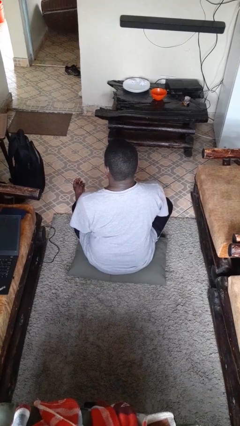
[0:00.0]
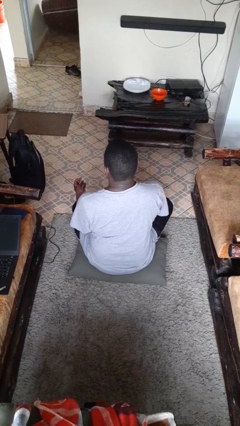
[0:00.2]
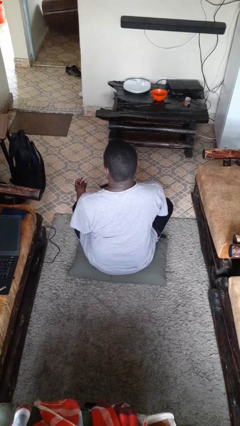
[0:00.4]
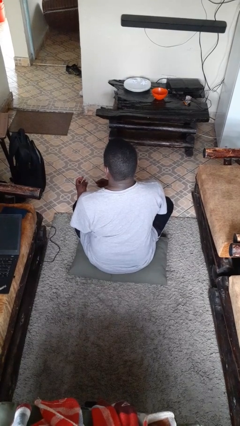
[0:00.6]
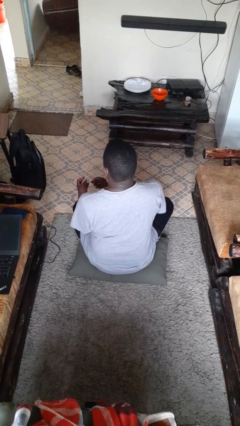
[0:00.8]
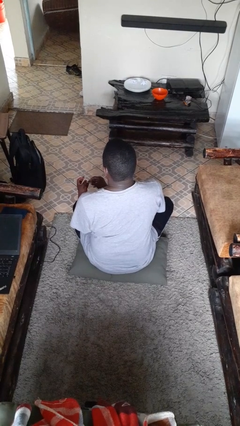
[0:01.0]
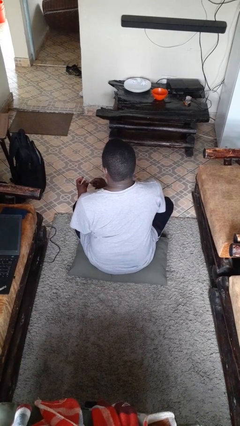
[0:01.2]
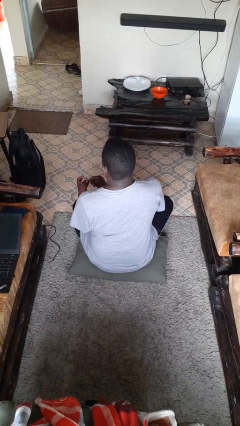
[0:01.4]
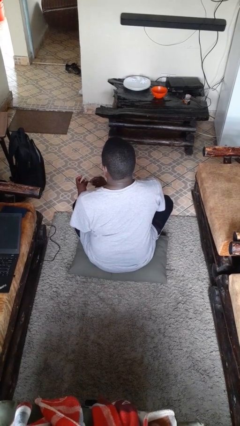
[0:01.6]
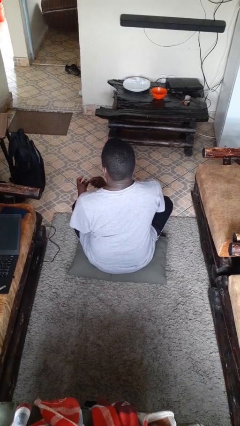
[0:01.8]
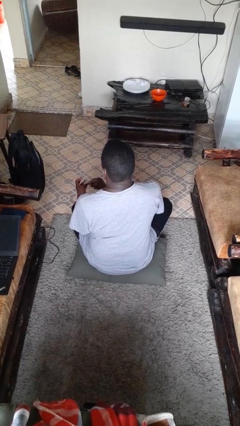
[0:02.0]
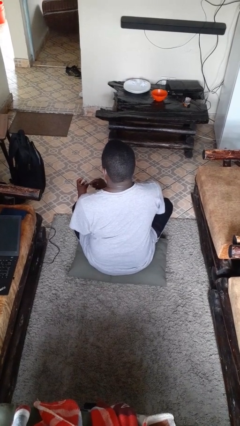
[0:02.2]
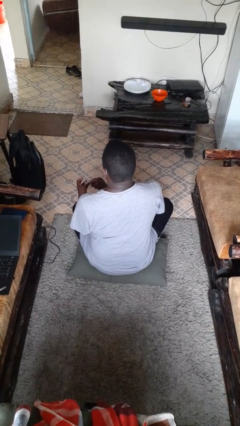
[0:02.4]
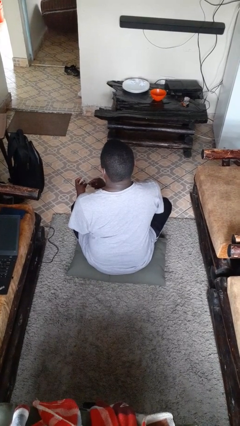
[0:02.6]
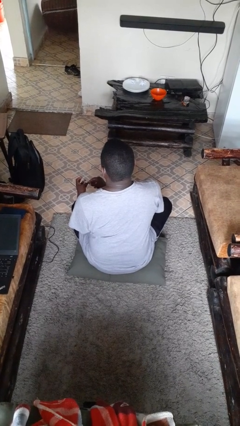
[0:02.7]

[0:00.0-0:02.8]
person files fingernails

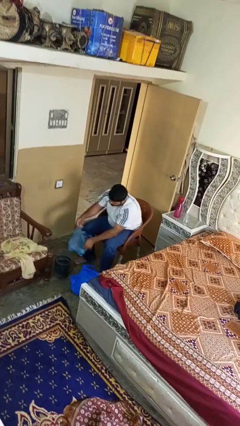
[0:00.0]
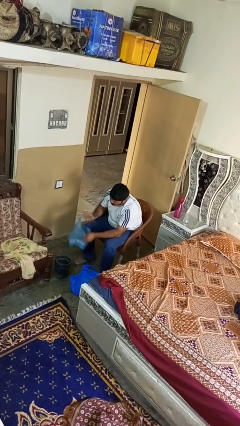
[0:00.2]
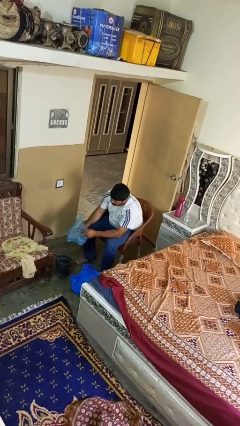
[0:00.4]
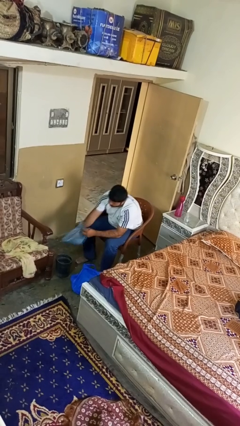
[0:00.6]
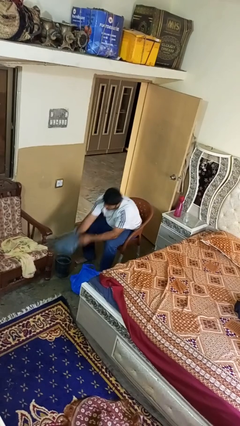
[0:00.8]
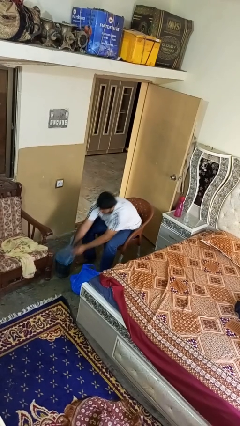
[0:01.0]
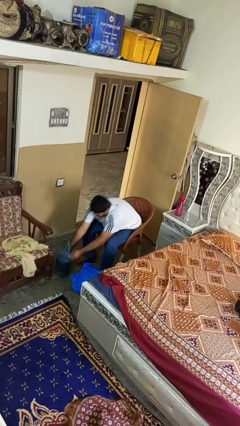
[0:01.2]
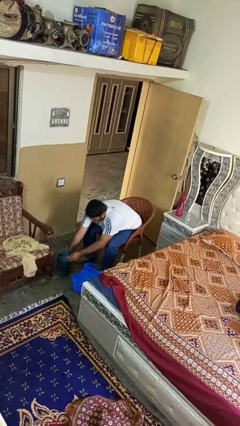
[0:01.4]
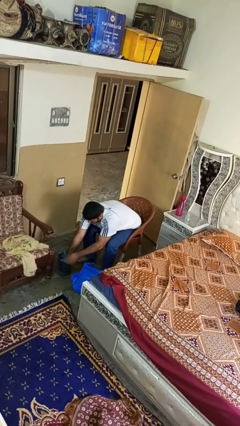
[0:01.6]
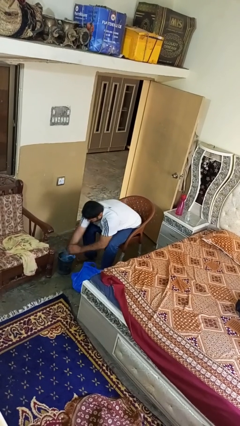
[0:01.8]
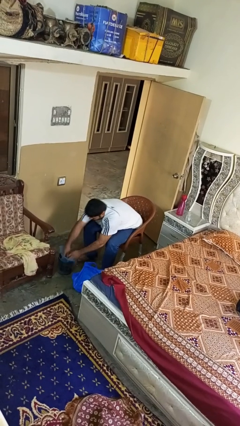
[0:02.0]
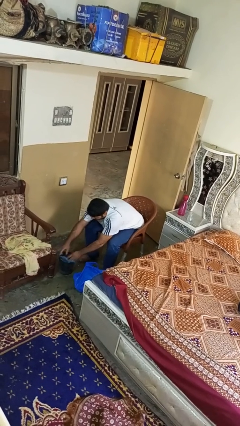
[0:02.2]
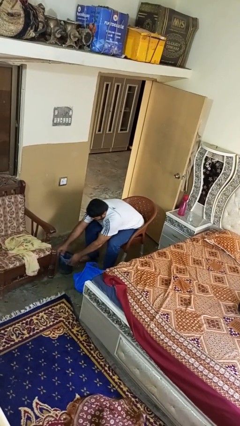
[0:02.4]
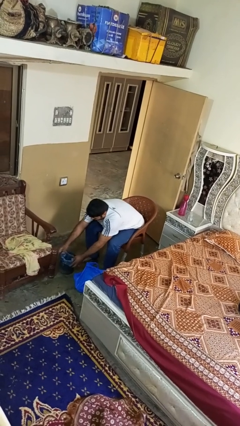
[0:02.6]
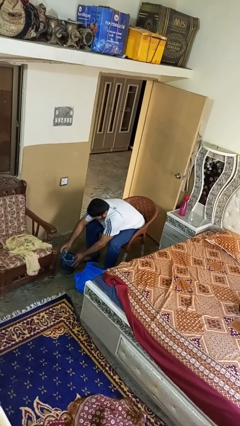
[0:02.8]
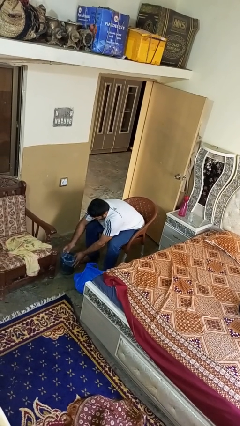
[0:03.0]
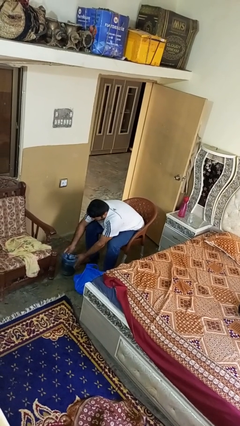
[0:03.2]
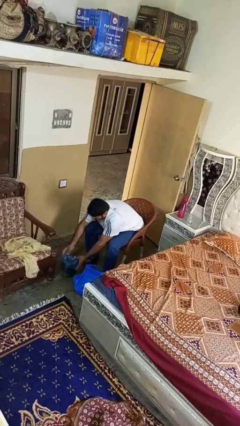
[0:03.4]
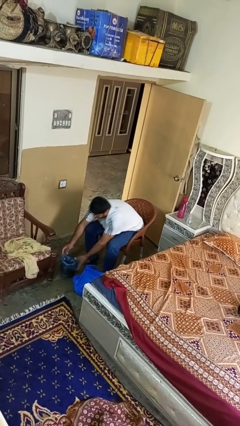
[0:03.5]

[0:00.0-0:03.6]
person inserts trashbag into trashcan

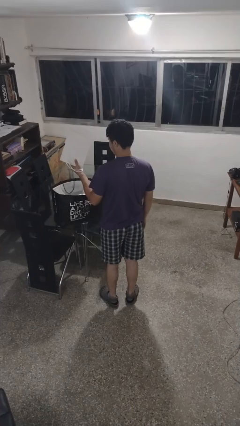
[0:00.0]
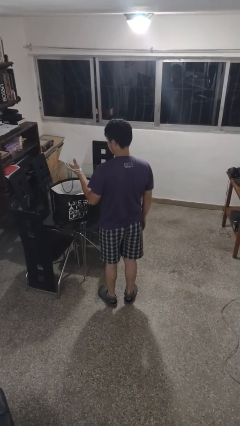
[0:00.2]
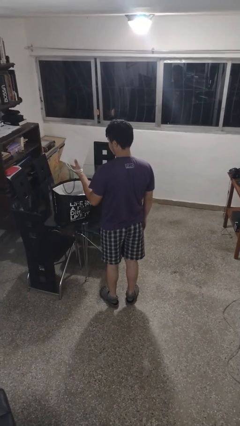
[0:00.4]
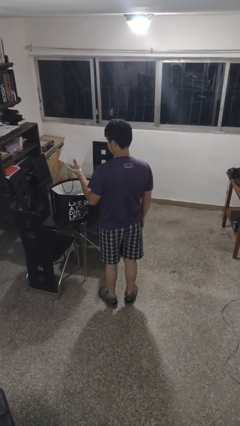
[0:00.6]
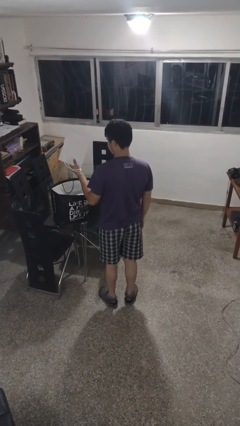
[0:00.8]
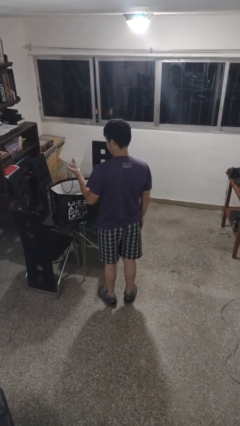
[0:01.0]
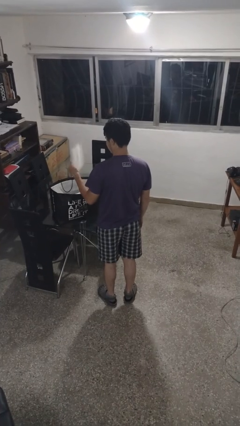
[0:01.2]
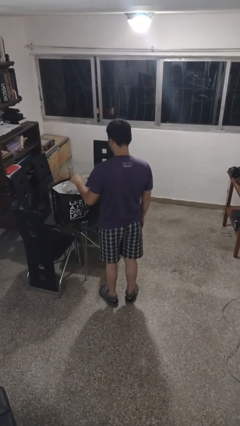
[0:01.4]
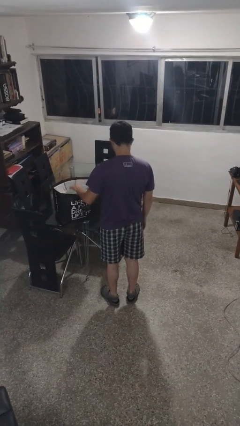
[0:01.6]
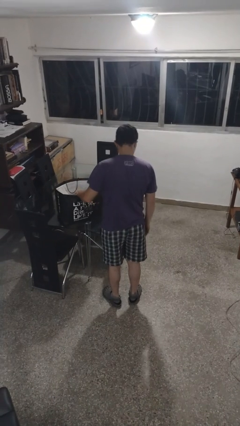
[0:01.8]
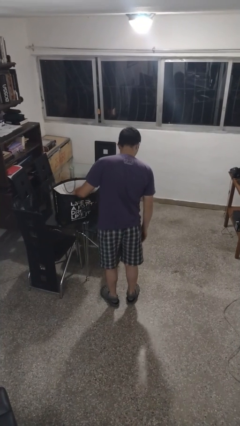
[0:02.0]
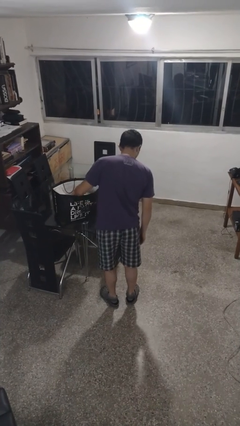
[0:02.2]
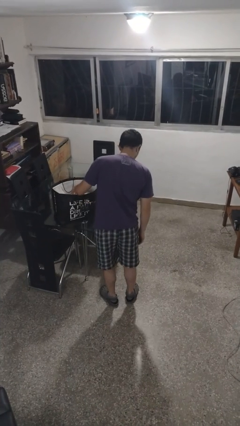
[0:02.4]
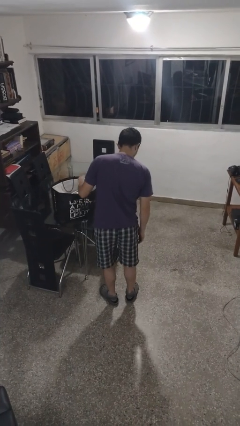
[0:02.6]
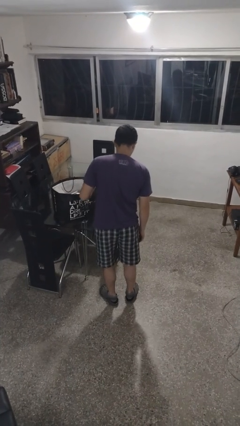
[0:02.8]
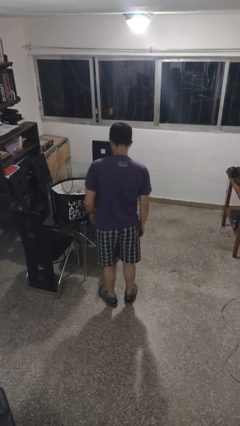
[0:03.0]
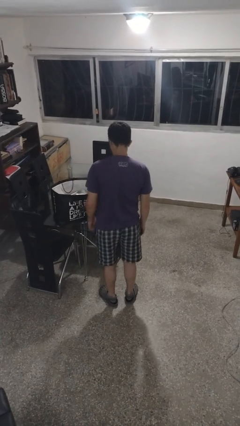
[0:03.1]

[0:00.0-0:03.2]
person puts object into bag

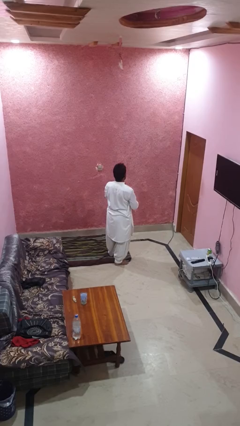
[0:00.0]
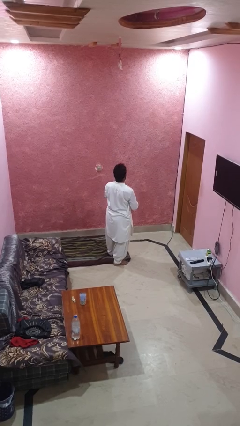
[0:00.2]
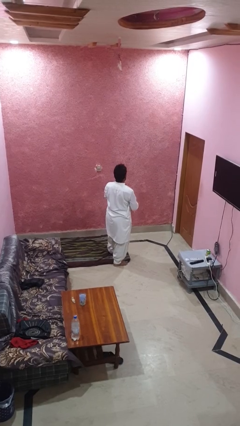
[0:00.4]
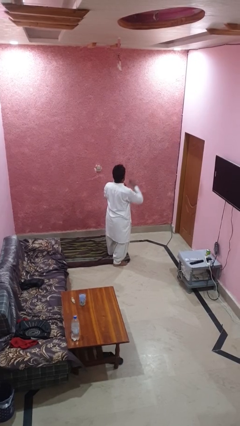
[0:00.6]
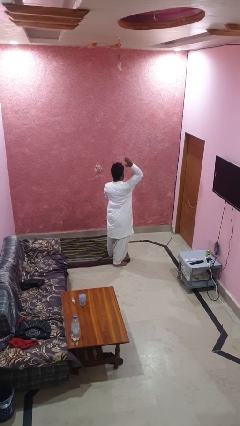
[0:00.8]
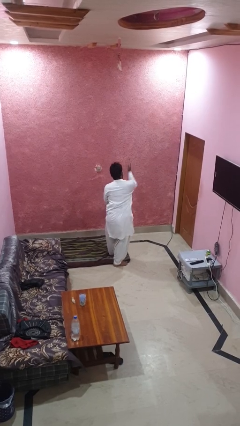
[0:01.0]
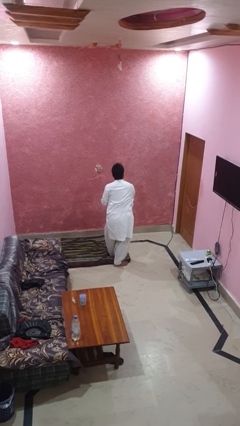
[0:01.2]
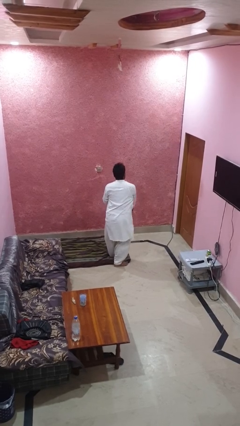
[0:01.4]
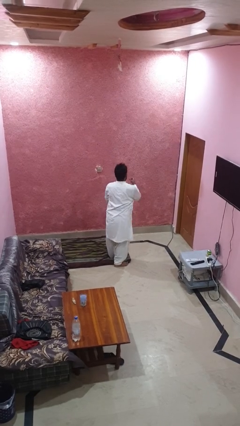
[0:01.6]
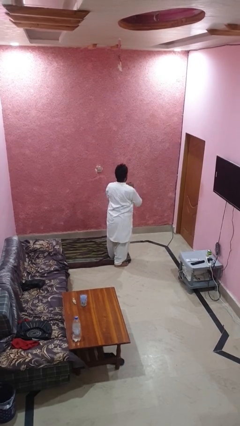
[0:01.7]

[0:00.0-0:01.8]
person karate chop

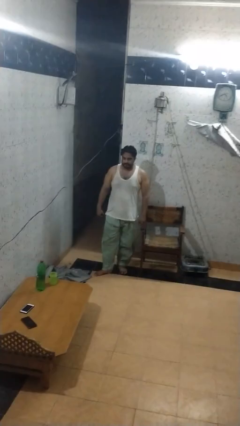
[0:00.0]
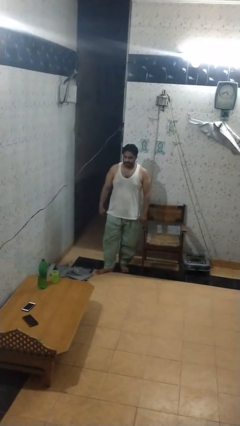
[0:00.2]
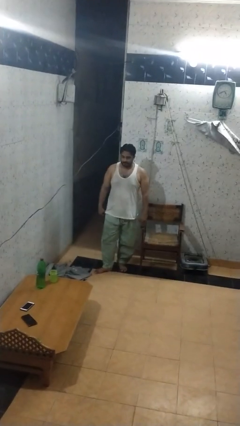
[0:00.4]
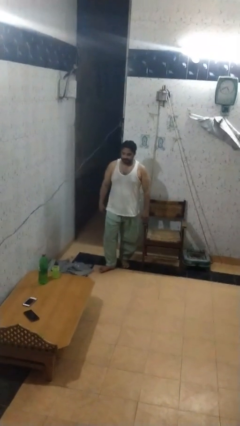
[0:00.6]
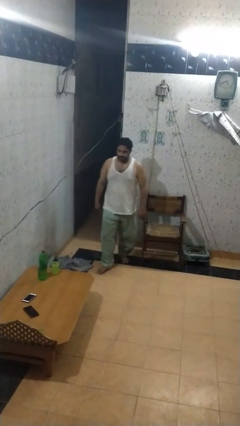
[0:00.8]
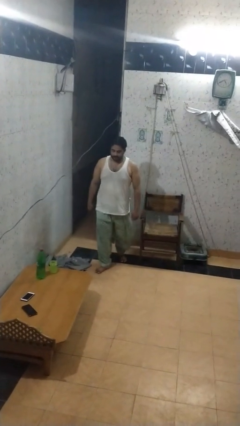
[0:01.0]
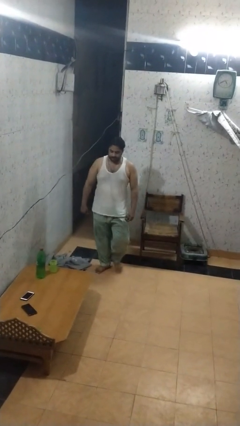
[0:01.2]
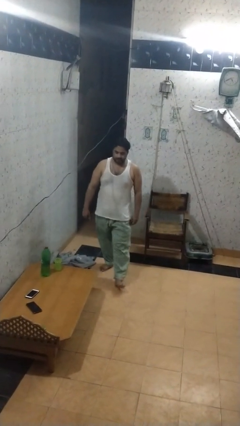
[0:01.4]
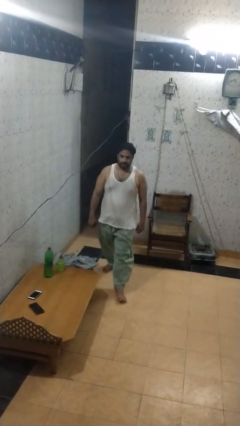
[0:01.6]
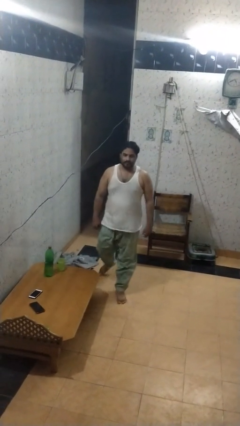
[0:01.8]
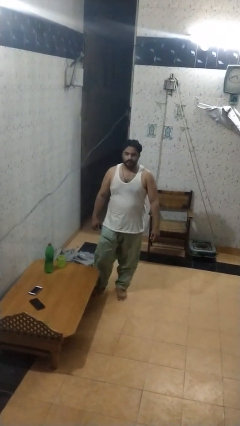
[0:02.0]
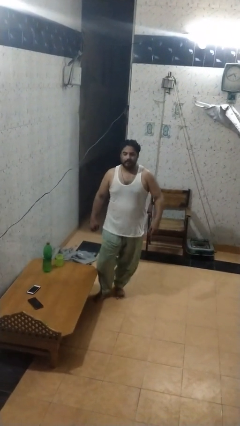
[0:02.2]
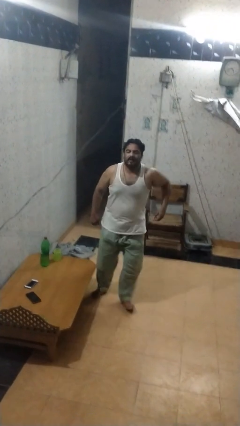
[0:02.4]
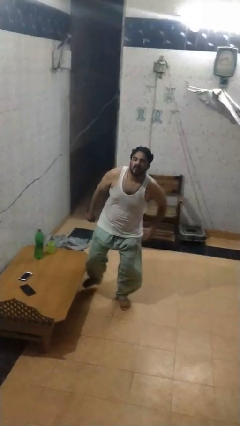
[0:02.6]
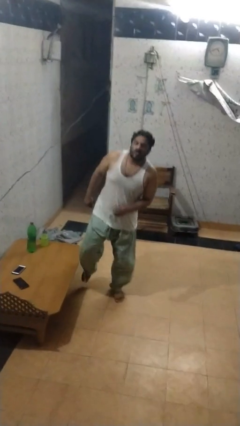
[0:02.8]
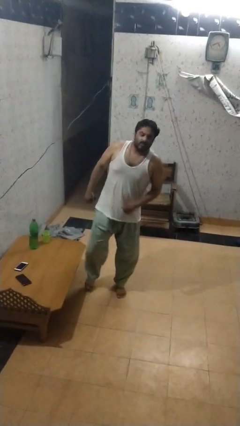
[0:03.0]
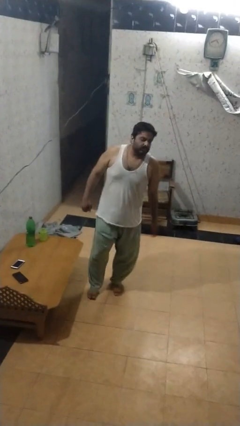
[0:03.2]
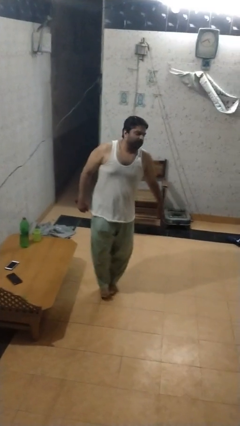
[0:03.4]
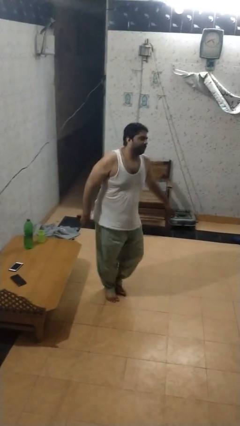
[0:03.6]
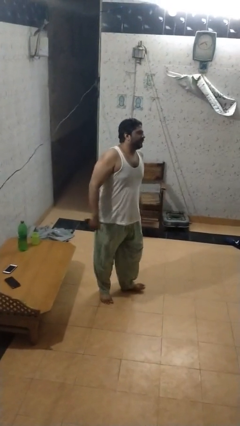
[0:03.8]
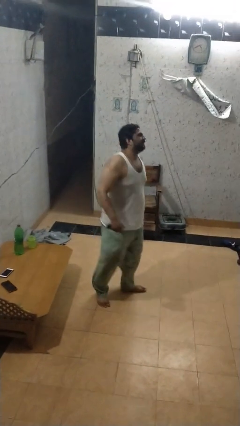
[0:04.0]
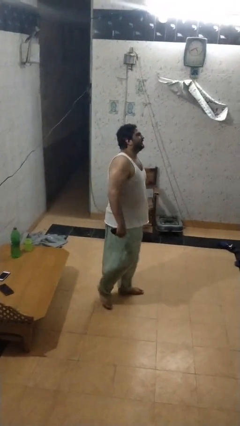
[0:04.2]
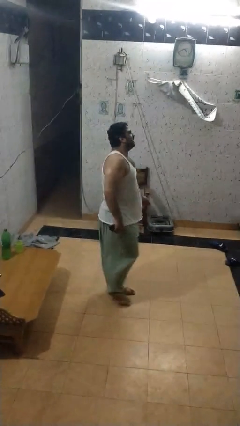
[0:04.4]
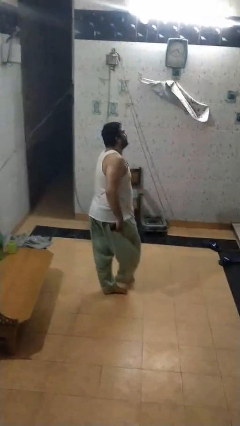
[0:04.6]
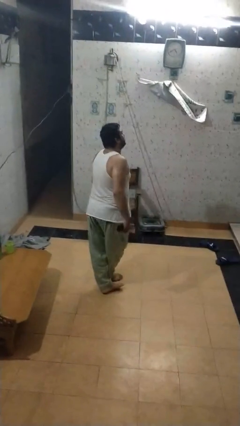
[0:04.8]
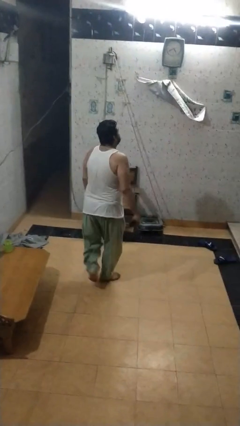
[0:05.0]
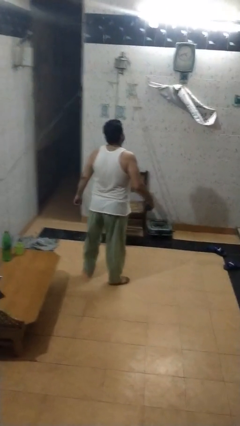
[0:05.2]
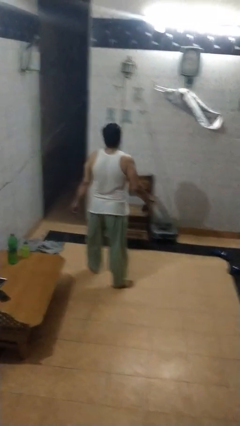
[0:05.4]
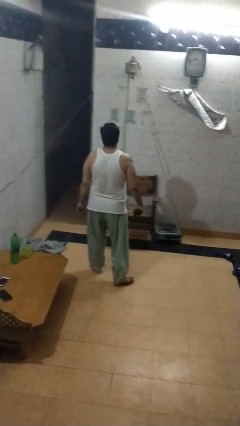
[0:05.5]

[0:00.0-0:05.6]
person bumps into table

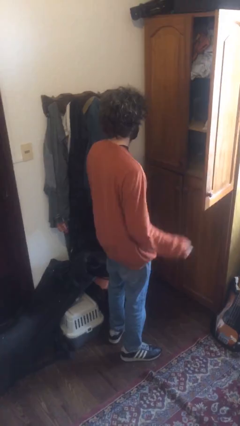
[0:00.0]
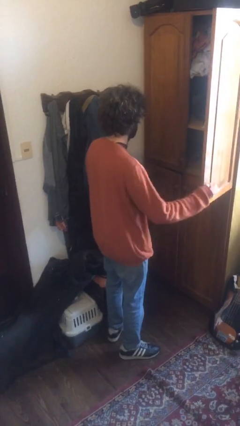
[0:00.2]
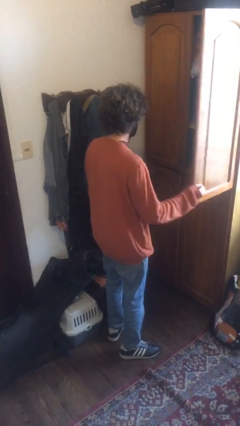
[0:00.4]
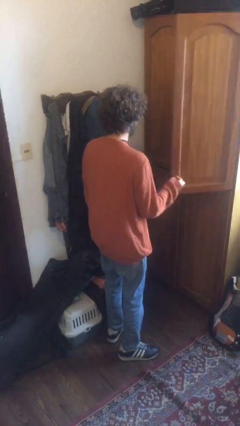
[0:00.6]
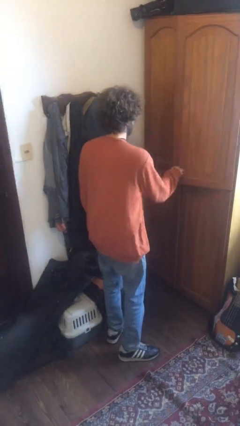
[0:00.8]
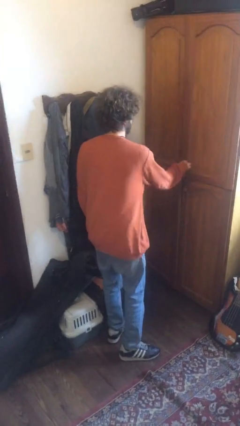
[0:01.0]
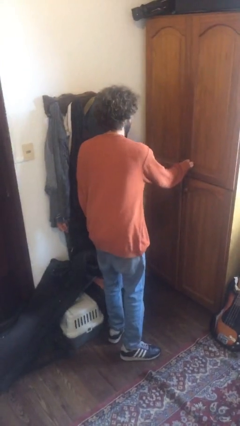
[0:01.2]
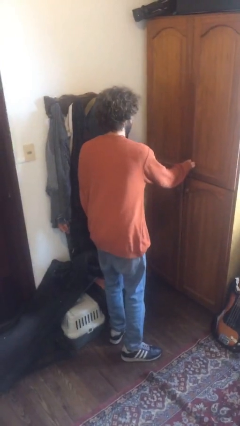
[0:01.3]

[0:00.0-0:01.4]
person closes dresser drawer
